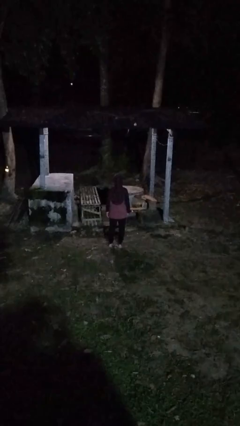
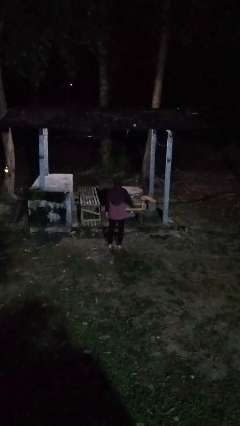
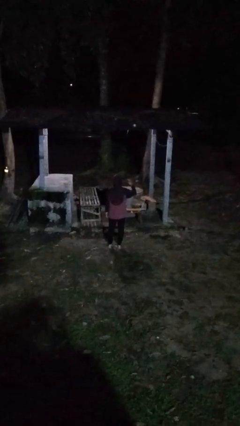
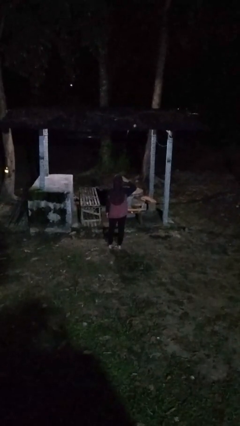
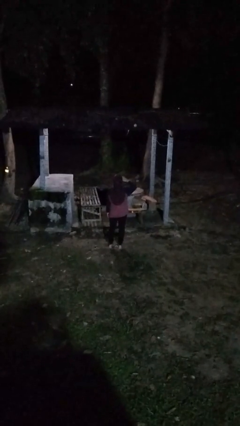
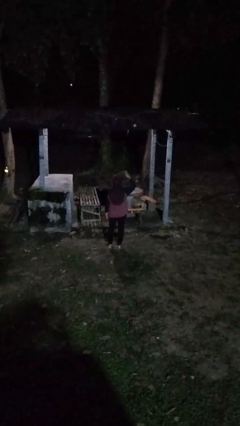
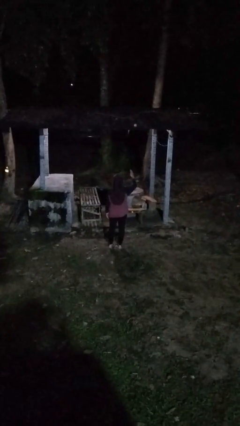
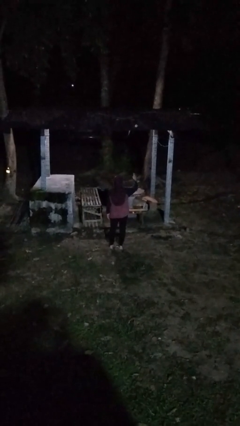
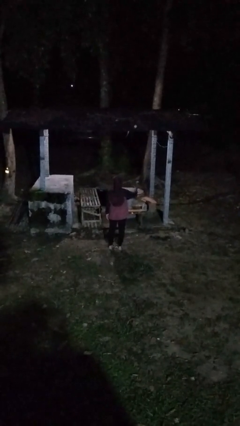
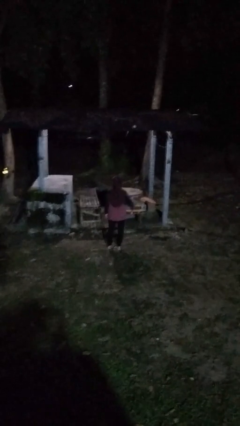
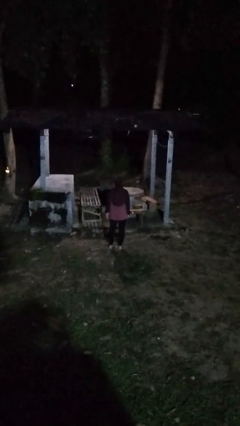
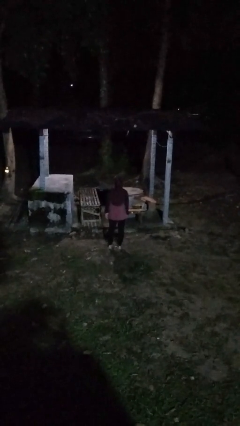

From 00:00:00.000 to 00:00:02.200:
person salutes

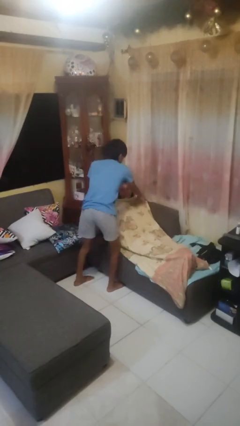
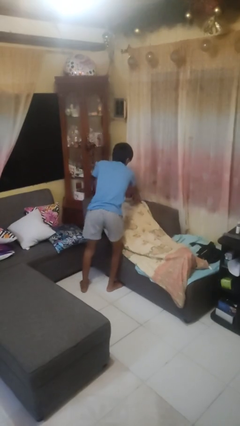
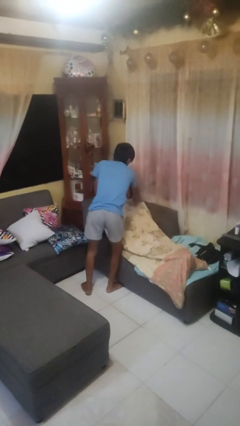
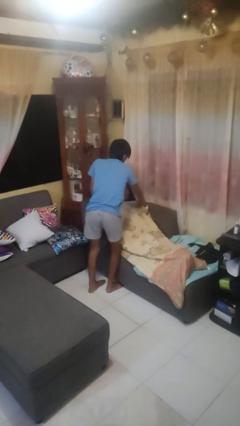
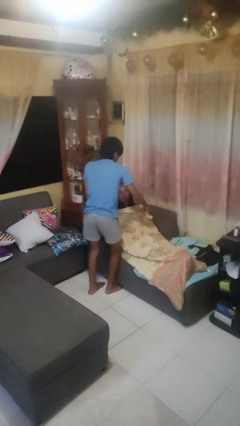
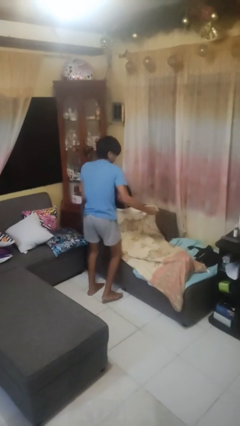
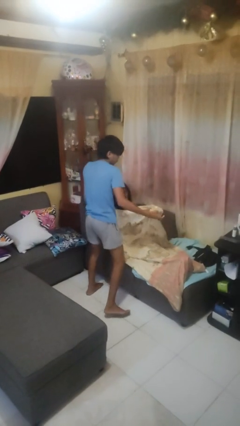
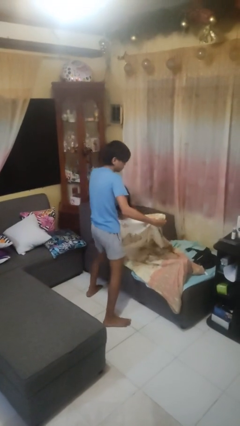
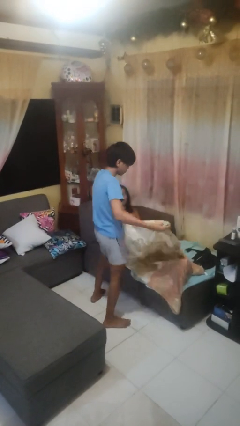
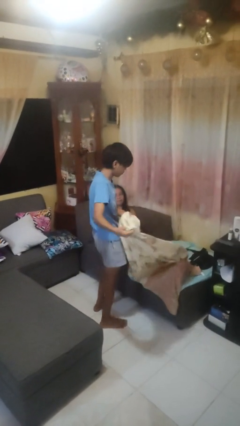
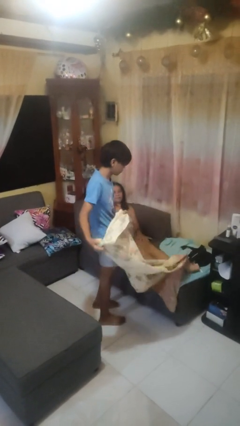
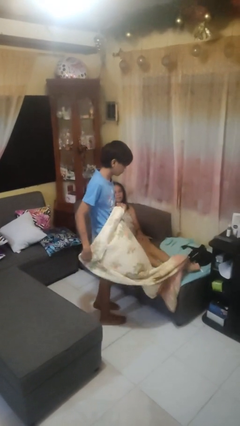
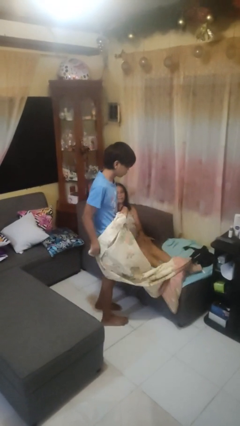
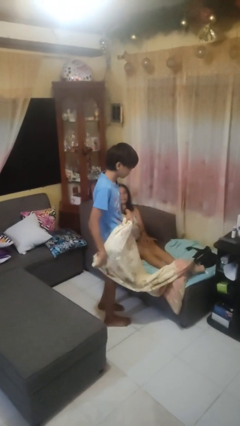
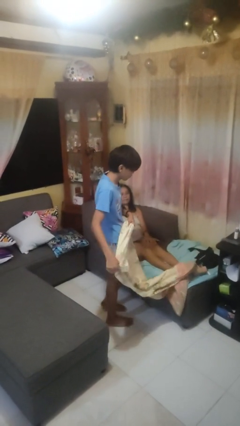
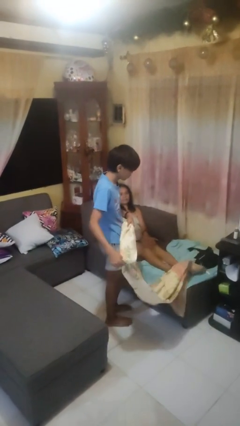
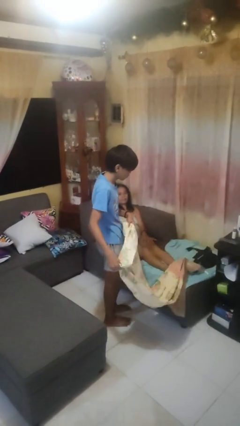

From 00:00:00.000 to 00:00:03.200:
person uncovers friend with blanket

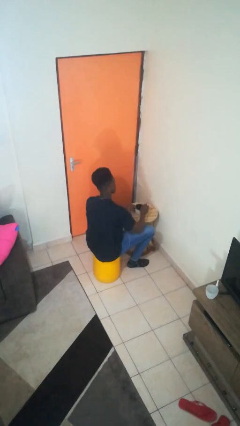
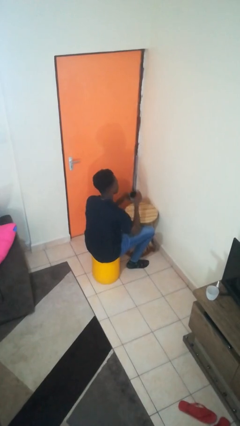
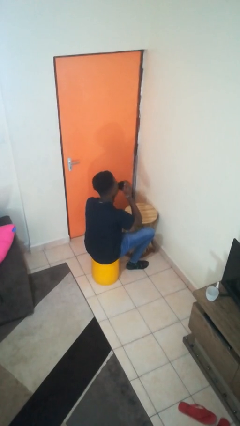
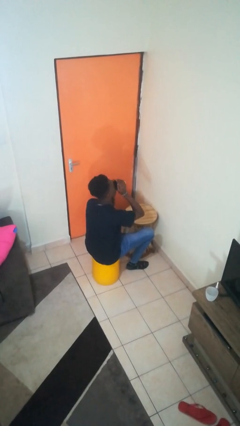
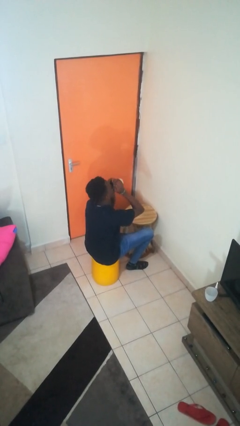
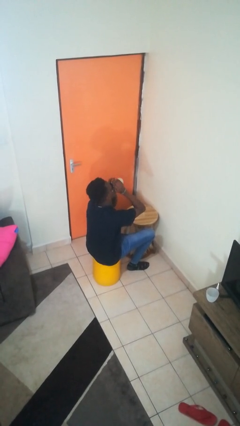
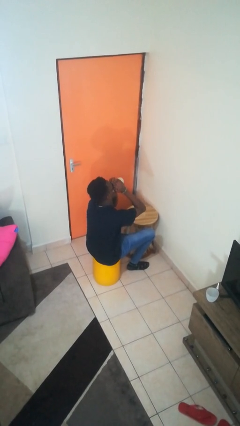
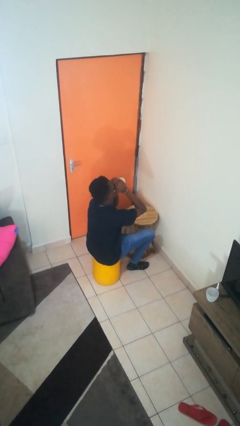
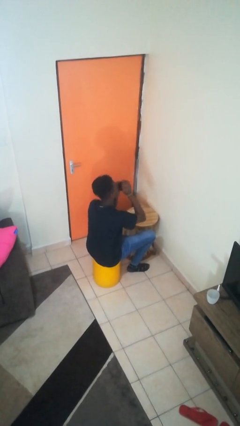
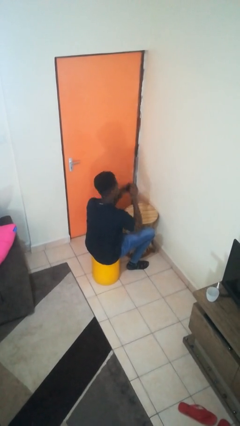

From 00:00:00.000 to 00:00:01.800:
person drinks from mug

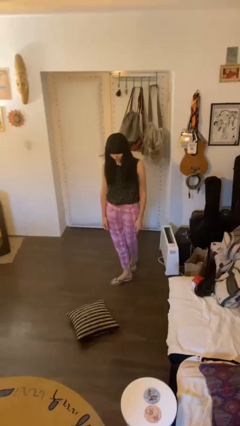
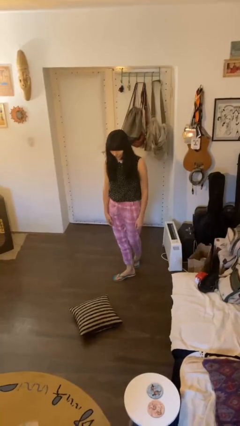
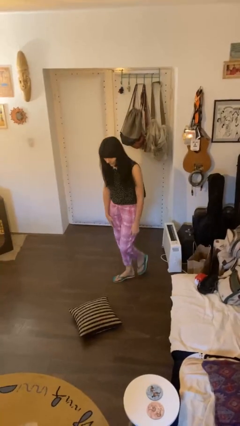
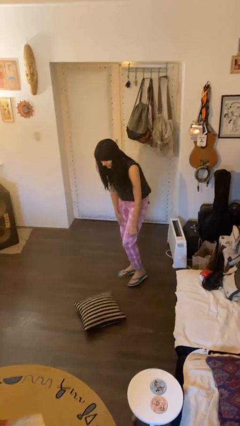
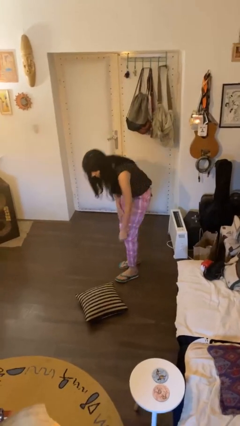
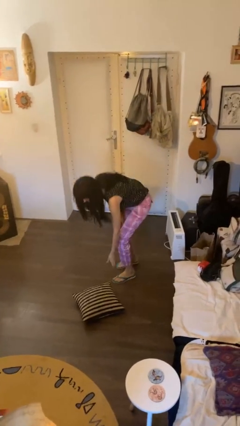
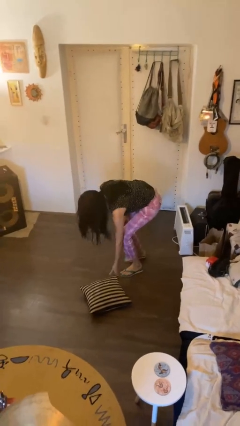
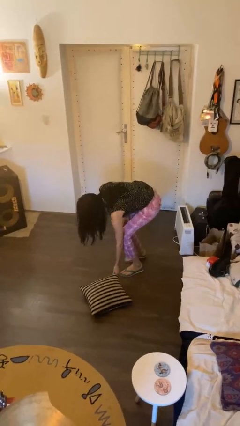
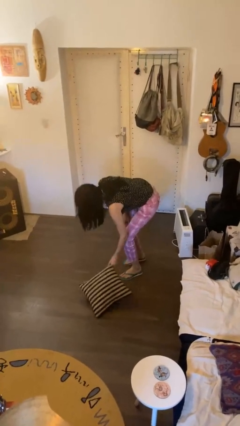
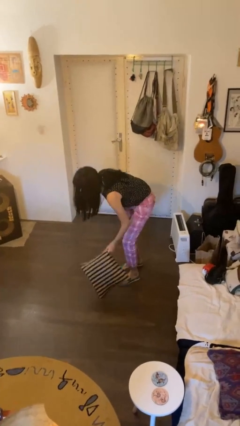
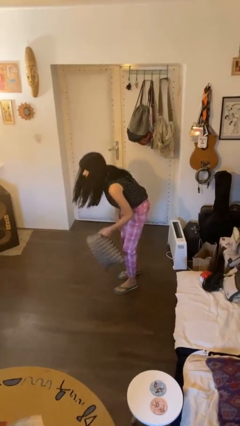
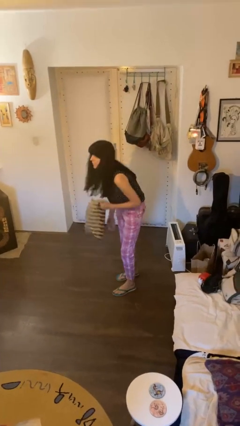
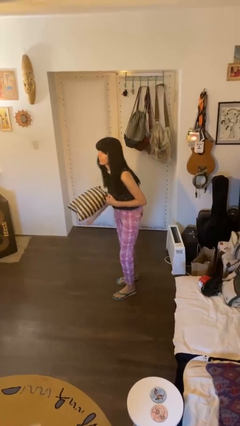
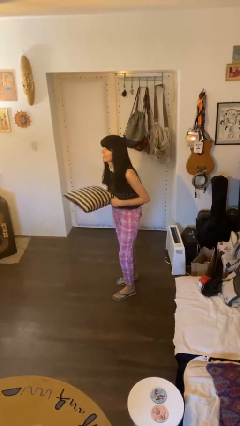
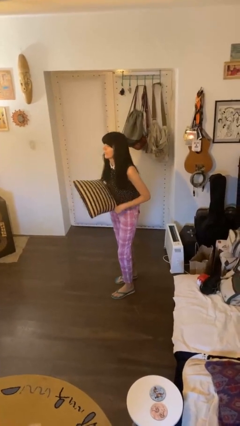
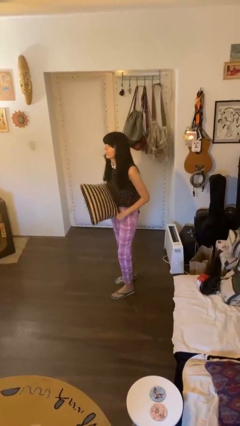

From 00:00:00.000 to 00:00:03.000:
person picks up object from floor

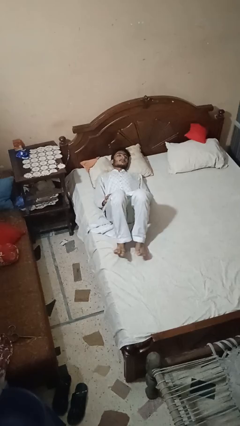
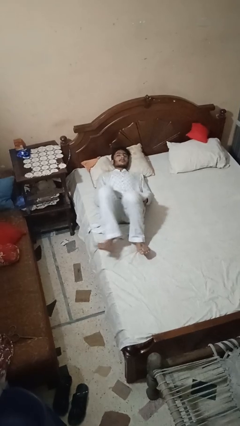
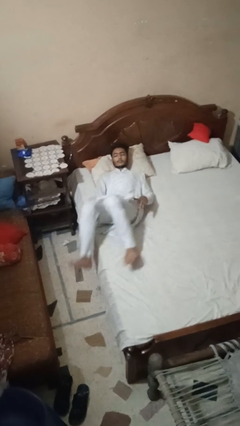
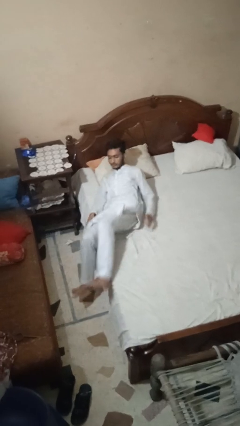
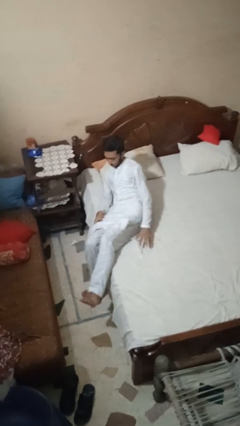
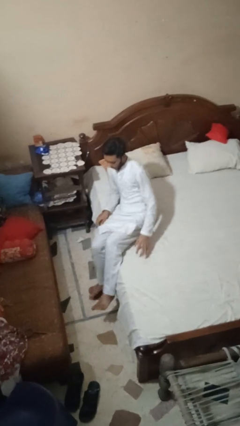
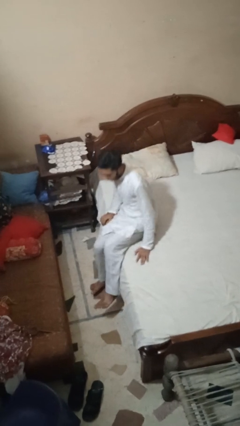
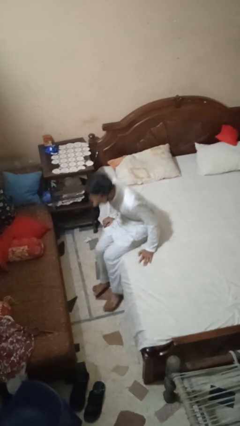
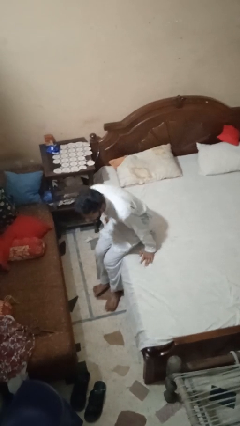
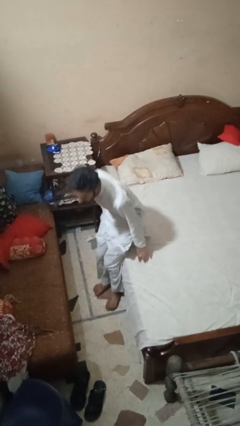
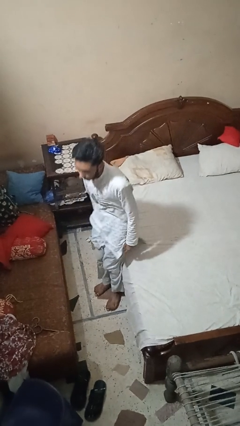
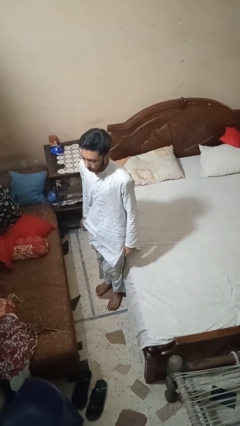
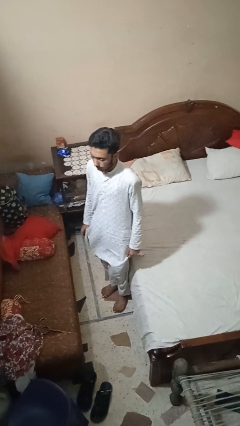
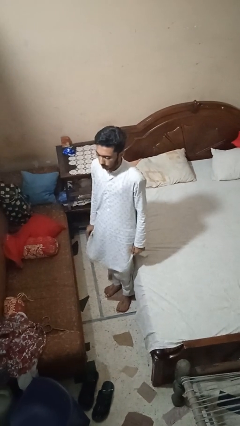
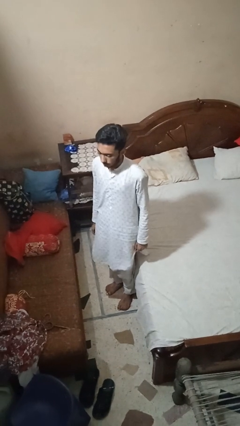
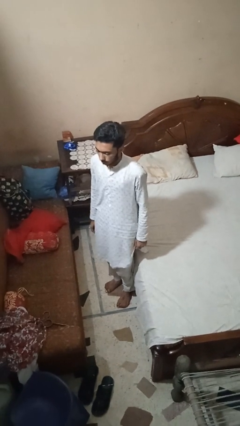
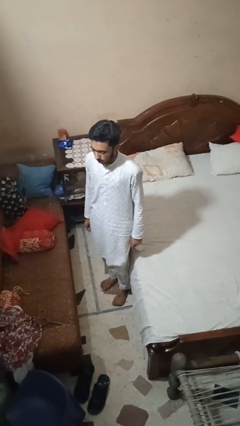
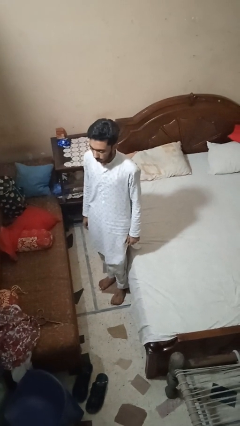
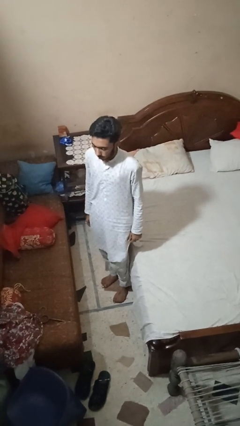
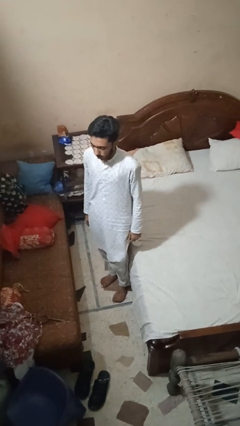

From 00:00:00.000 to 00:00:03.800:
person stands up

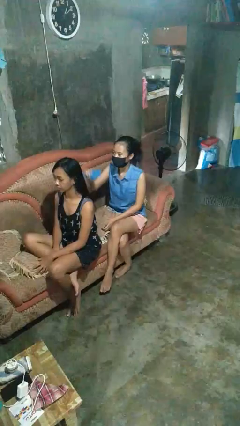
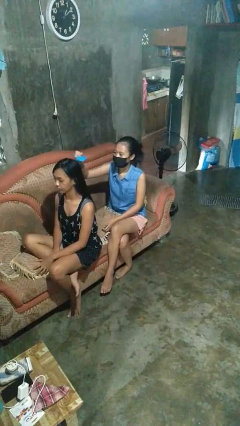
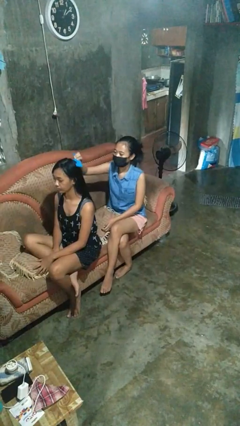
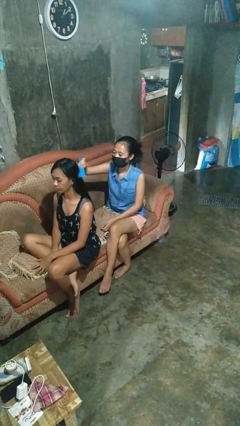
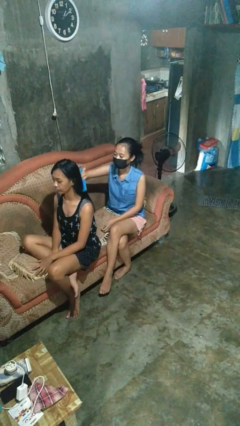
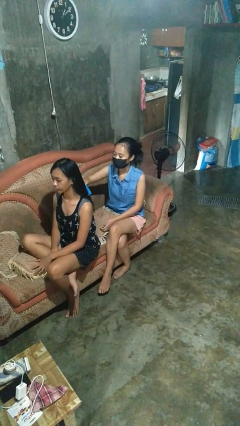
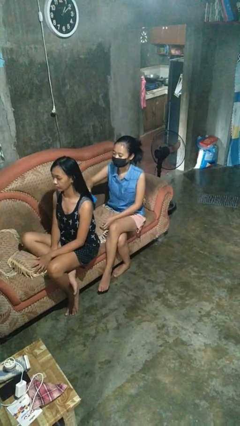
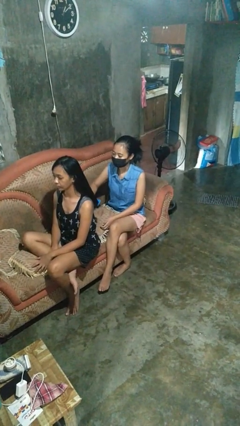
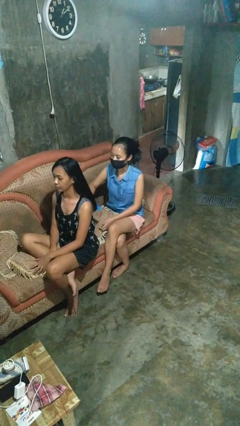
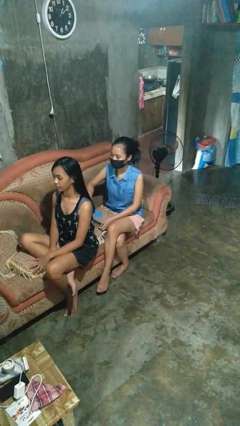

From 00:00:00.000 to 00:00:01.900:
person brushes hair of person

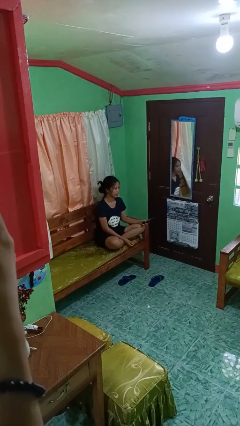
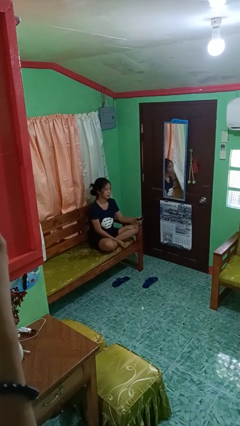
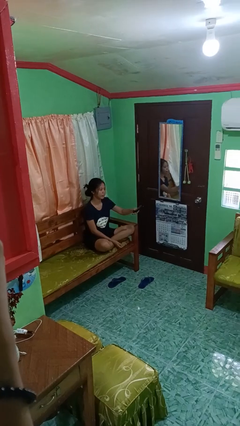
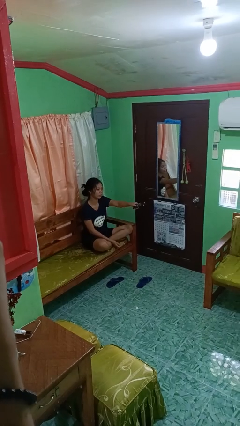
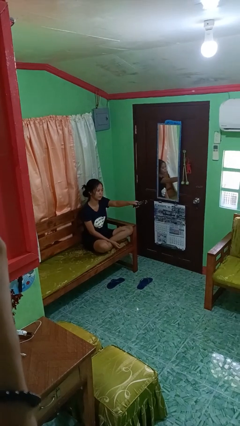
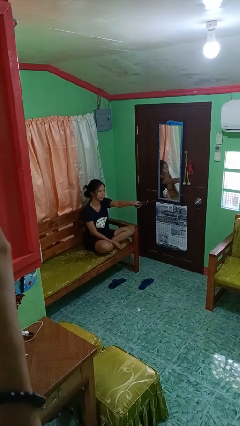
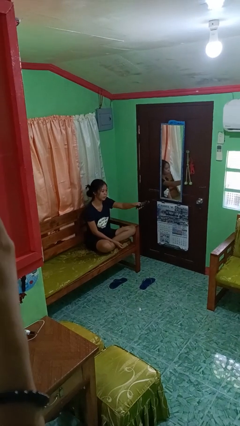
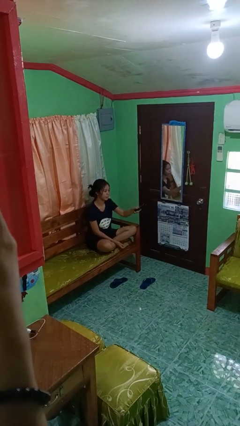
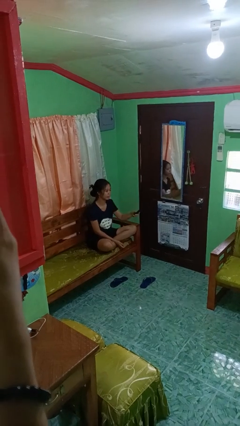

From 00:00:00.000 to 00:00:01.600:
person uses television remote
